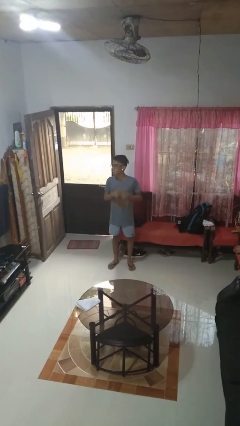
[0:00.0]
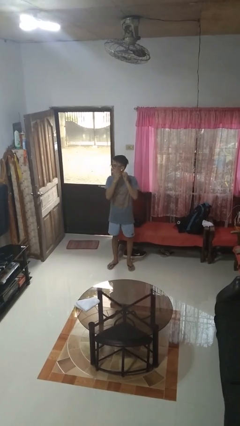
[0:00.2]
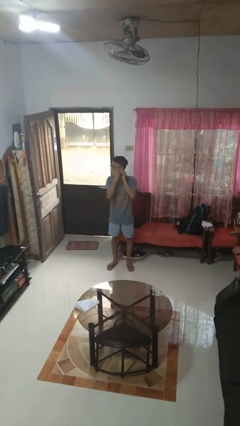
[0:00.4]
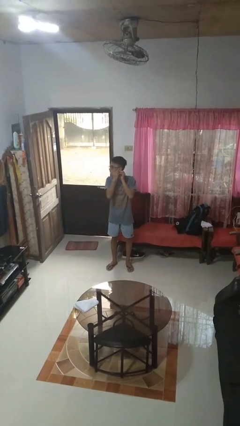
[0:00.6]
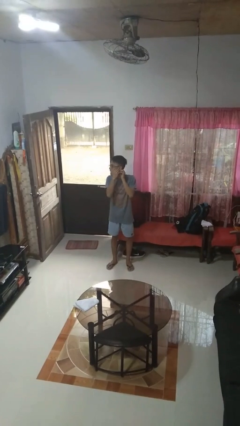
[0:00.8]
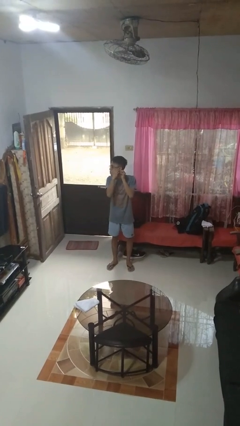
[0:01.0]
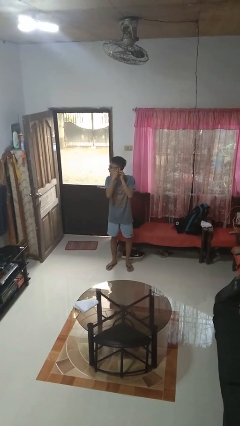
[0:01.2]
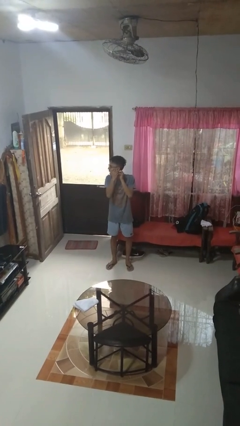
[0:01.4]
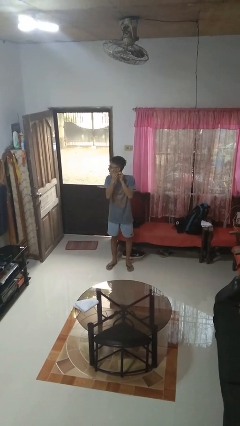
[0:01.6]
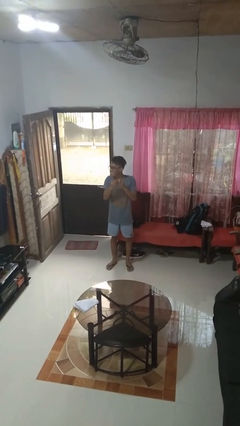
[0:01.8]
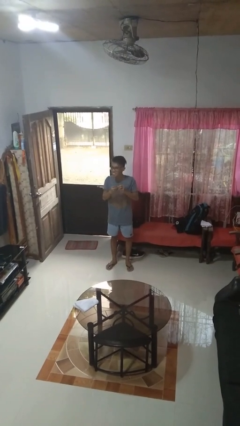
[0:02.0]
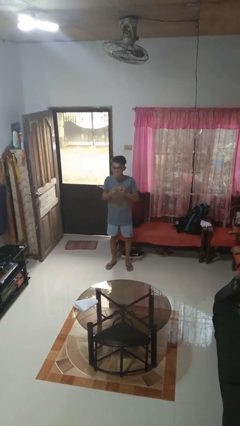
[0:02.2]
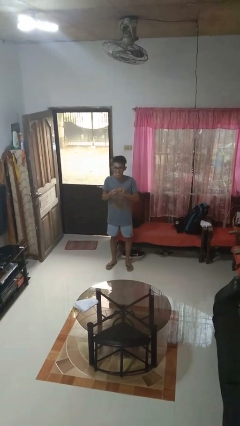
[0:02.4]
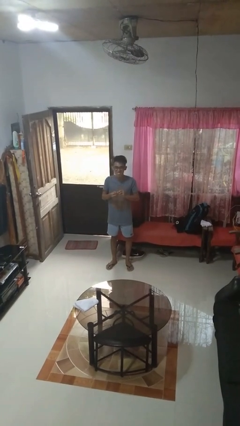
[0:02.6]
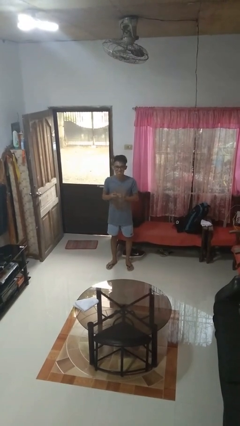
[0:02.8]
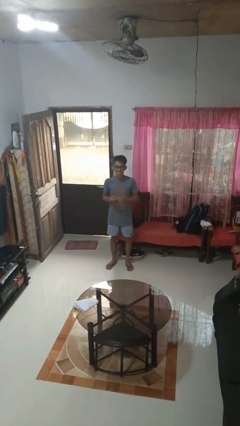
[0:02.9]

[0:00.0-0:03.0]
person takes off earrings

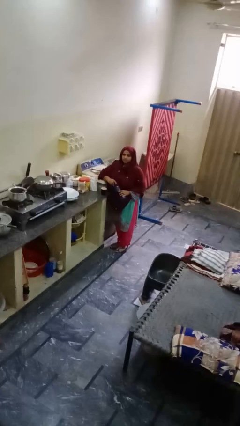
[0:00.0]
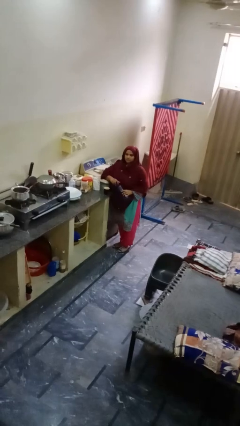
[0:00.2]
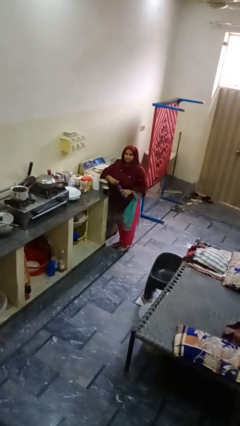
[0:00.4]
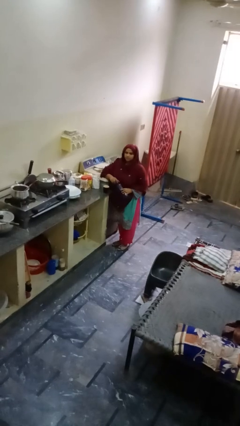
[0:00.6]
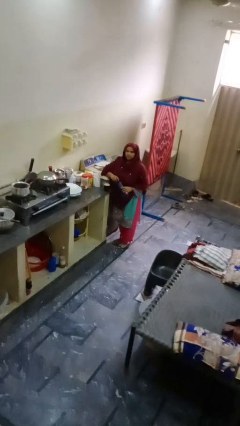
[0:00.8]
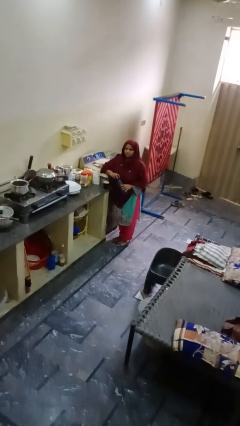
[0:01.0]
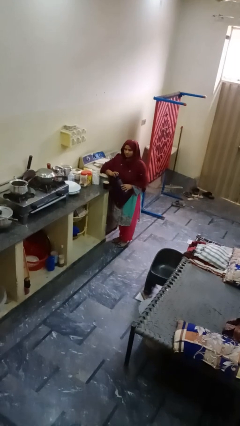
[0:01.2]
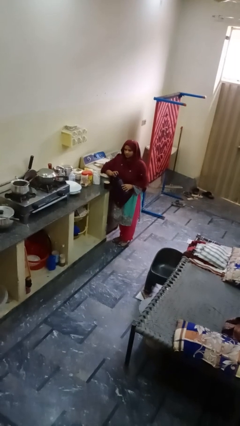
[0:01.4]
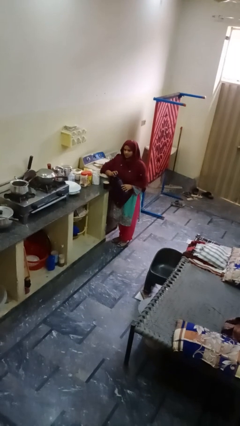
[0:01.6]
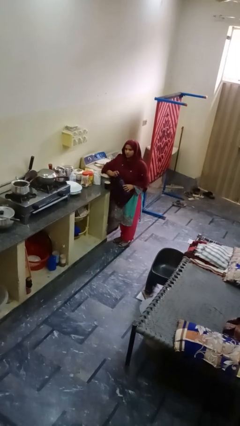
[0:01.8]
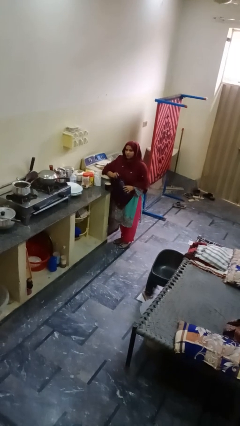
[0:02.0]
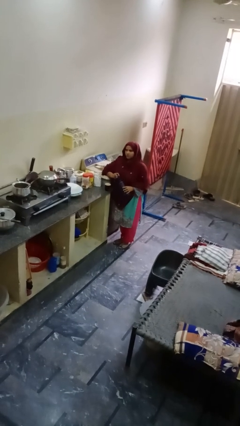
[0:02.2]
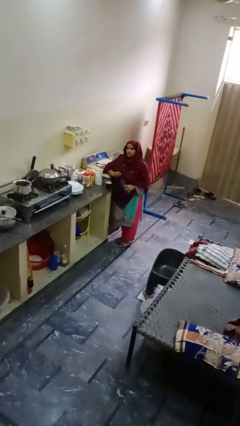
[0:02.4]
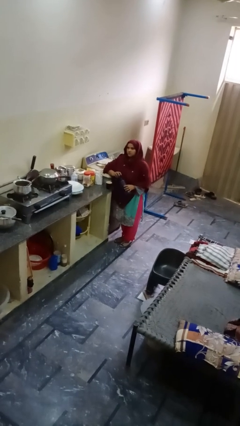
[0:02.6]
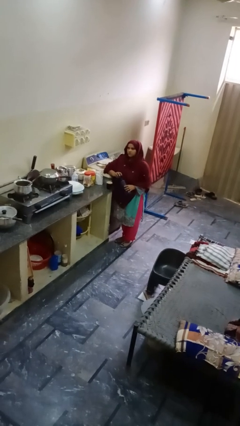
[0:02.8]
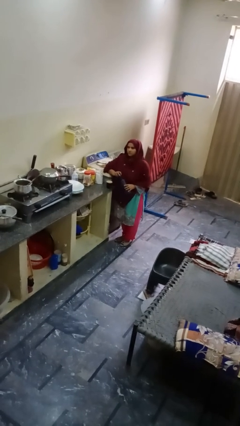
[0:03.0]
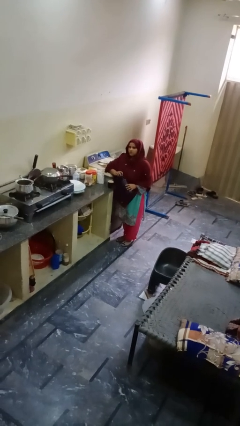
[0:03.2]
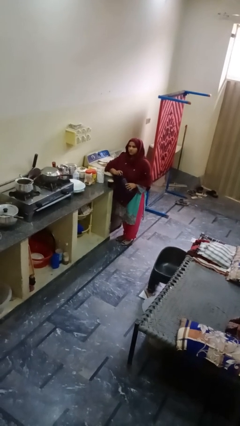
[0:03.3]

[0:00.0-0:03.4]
person unscrews lid from bottle

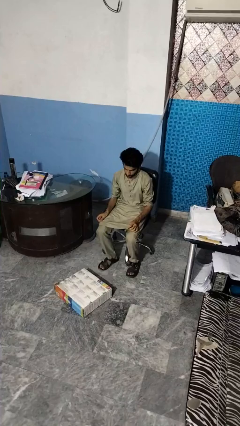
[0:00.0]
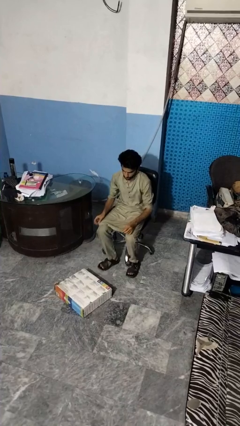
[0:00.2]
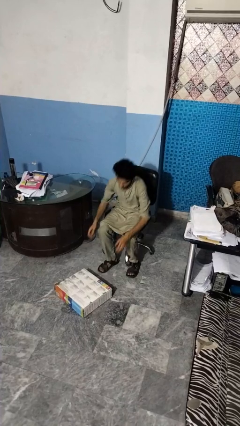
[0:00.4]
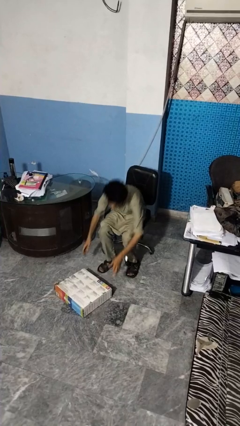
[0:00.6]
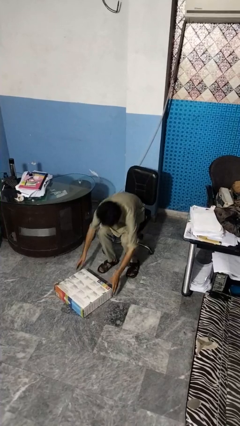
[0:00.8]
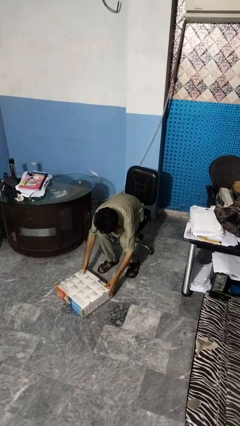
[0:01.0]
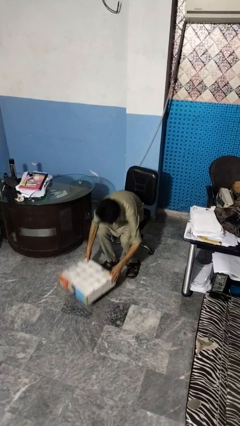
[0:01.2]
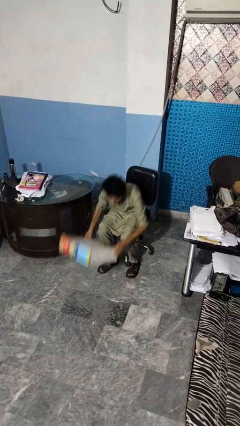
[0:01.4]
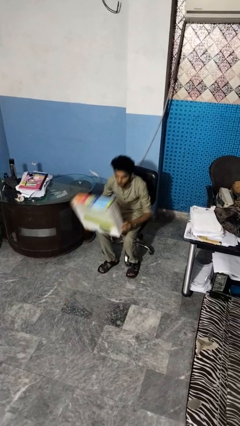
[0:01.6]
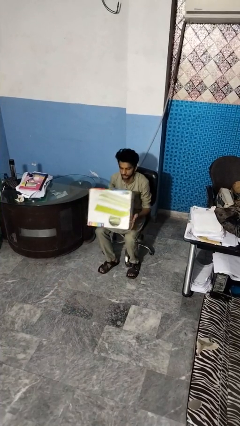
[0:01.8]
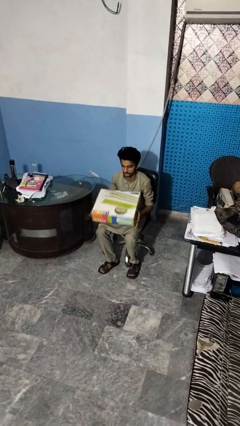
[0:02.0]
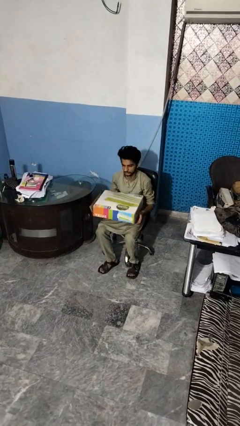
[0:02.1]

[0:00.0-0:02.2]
person picks up object from floor

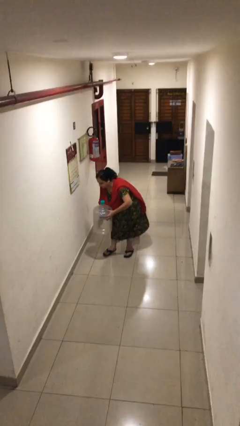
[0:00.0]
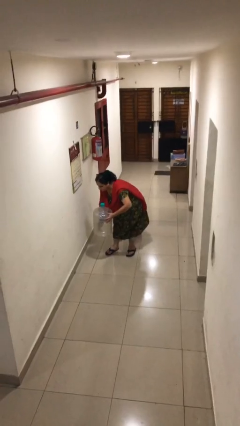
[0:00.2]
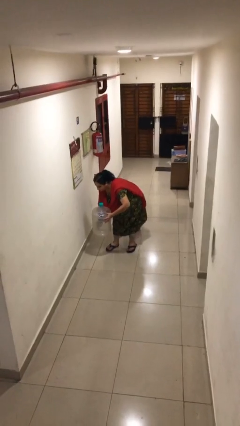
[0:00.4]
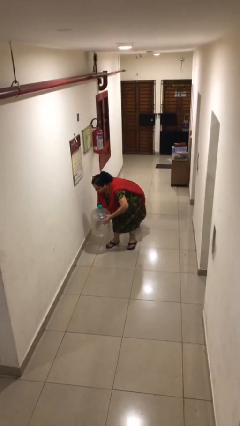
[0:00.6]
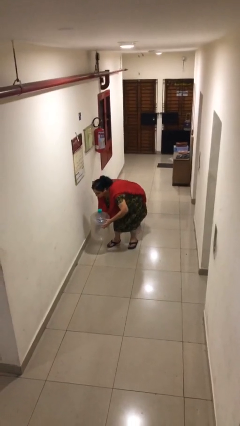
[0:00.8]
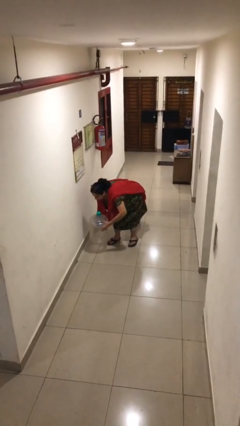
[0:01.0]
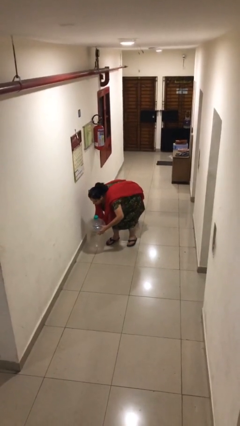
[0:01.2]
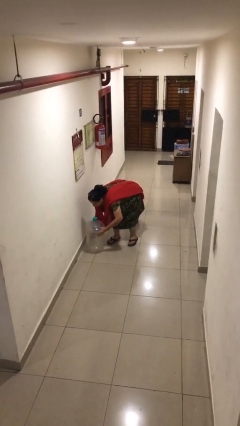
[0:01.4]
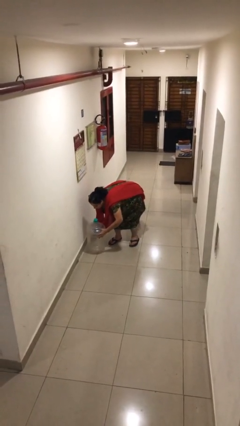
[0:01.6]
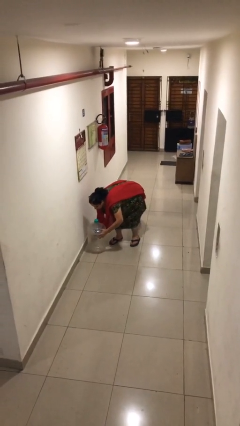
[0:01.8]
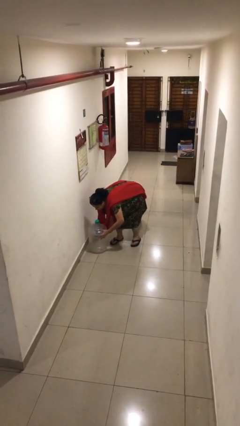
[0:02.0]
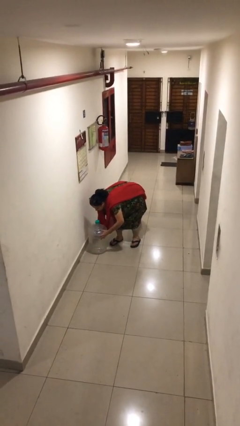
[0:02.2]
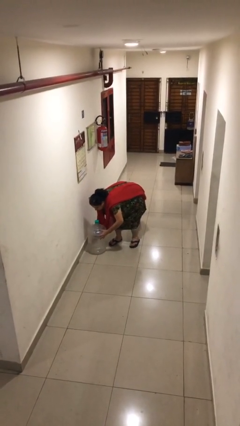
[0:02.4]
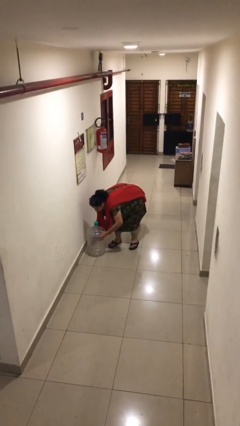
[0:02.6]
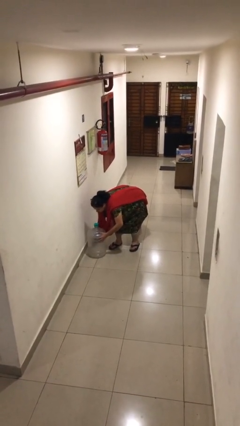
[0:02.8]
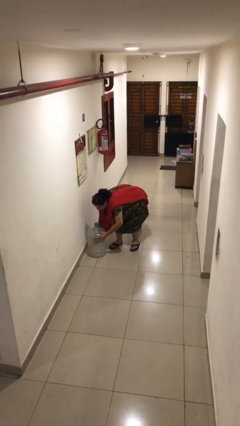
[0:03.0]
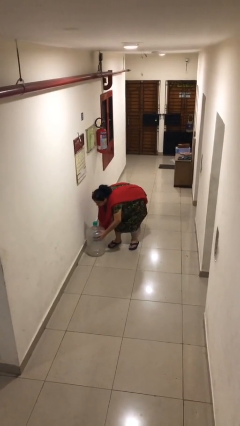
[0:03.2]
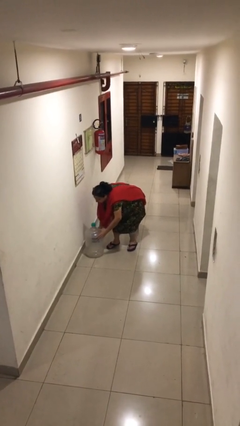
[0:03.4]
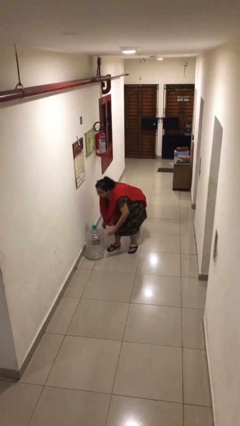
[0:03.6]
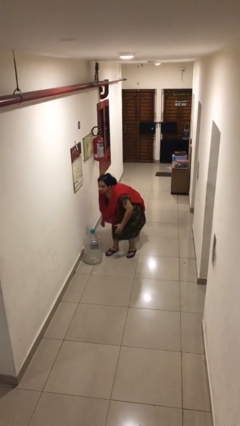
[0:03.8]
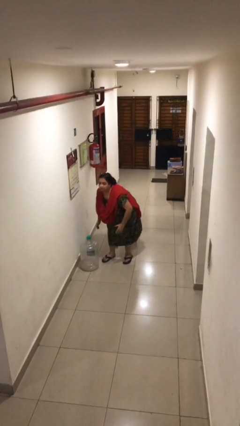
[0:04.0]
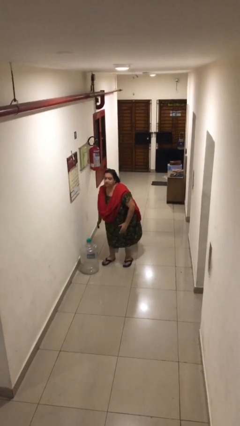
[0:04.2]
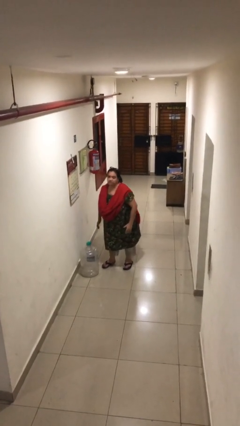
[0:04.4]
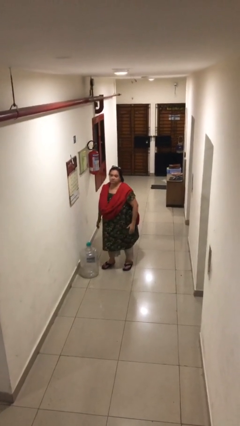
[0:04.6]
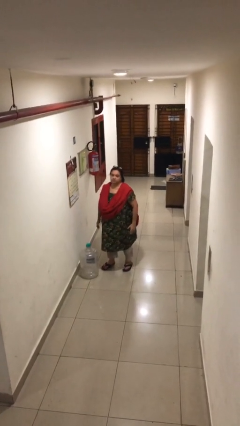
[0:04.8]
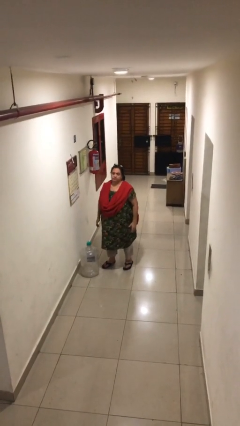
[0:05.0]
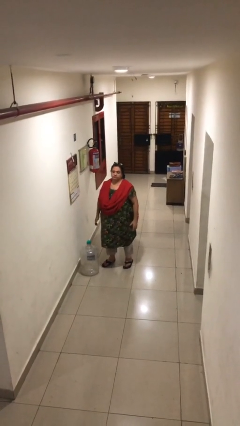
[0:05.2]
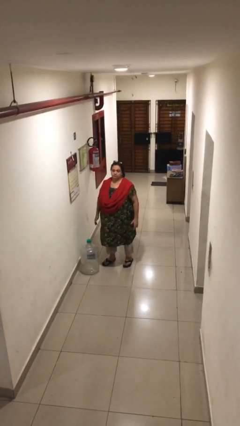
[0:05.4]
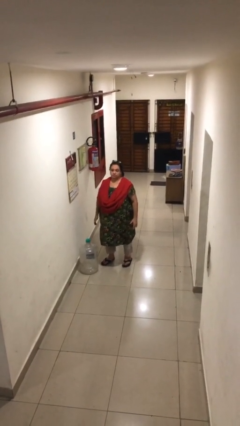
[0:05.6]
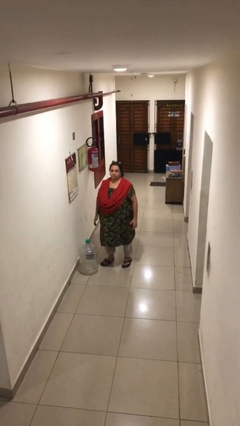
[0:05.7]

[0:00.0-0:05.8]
person puts down object on floor

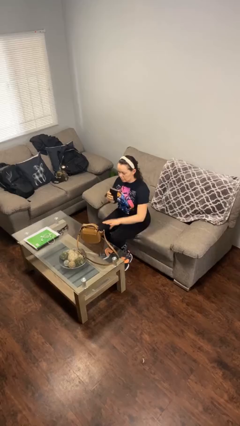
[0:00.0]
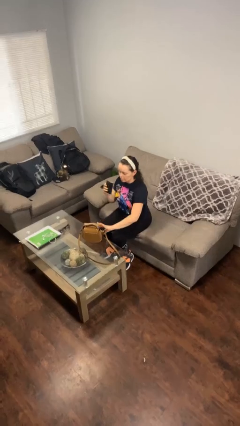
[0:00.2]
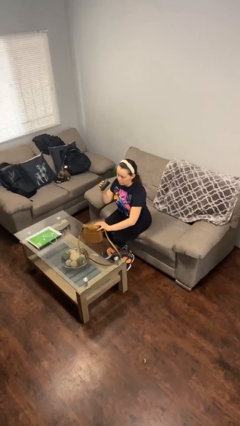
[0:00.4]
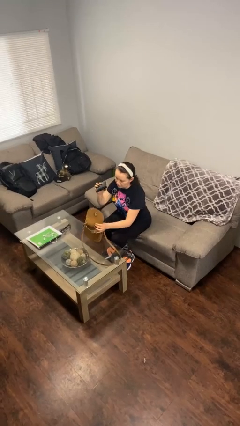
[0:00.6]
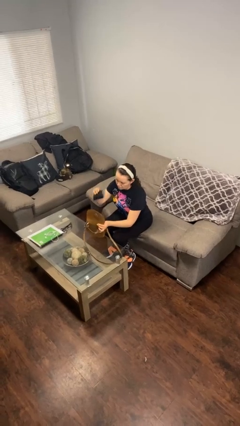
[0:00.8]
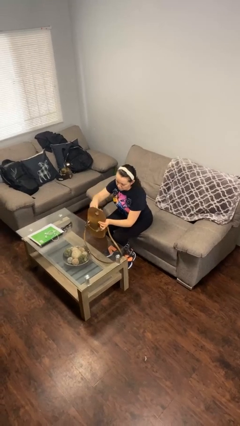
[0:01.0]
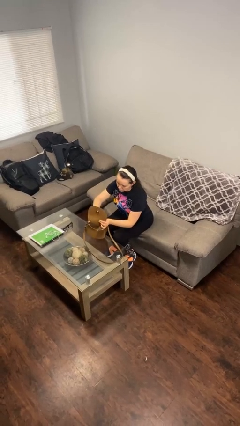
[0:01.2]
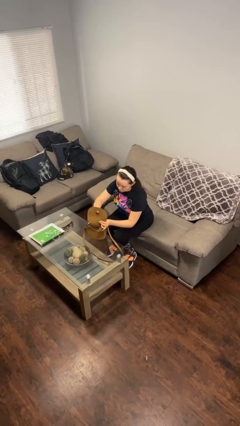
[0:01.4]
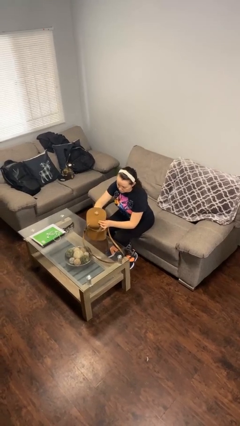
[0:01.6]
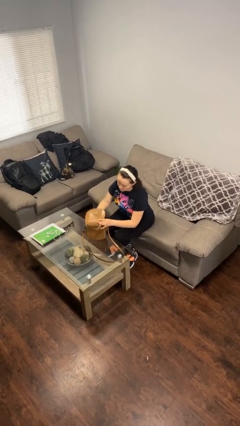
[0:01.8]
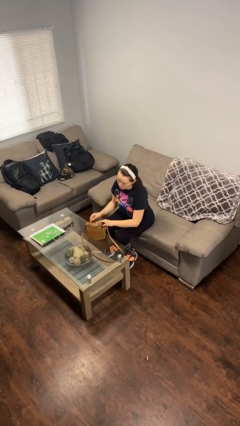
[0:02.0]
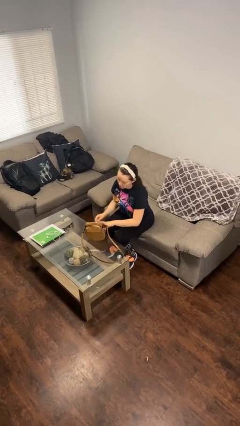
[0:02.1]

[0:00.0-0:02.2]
person puts object into purse

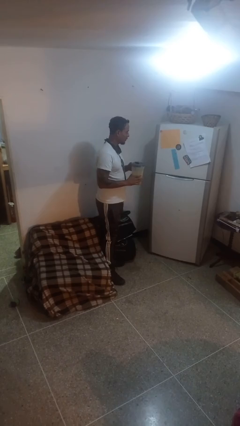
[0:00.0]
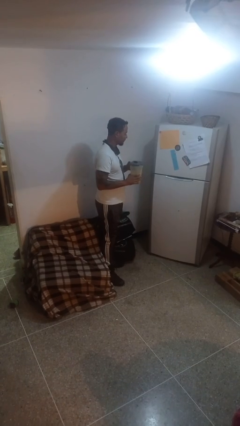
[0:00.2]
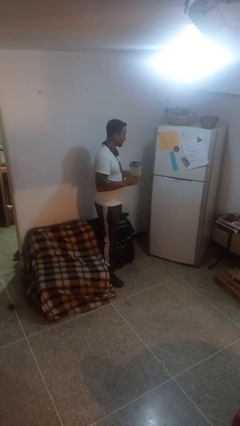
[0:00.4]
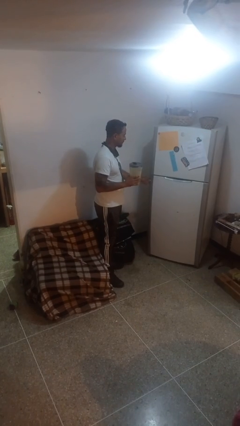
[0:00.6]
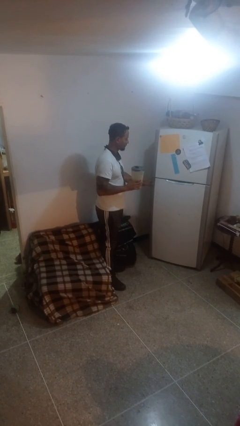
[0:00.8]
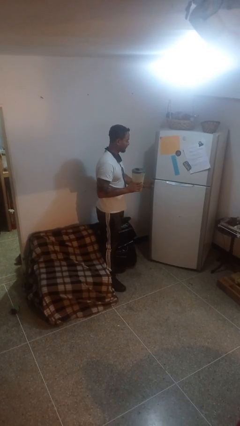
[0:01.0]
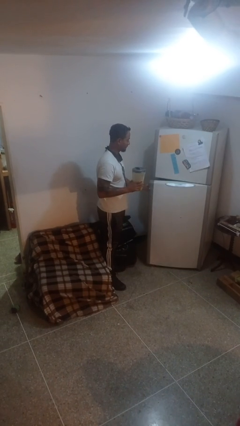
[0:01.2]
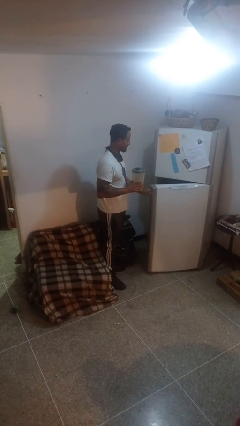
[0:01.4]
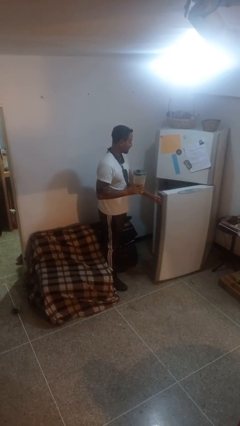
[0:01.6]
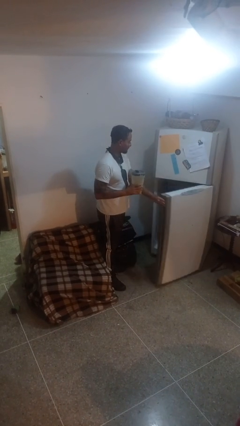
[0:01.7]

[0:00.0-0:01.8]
person opens refrigerator
